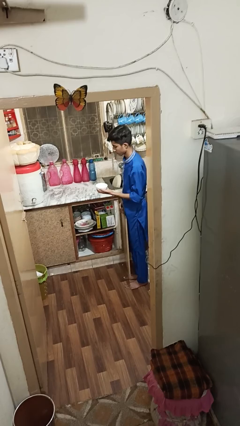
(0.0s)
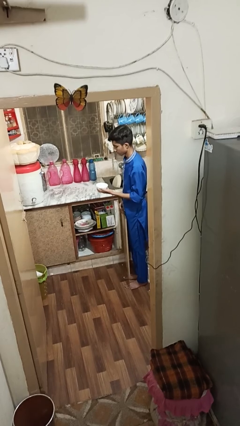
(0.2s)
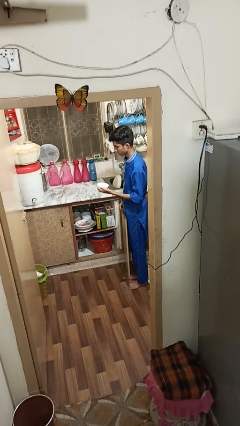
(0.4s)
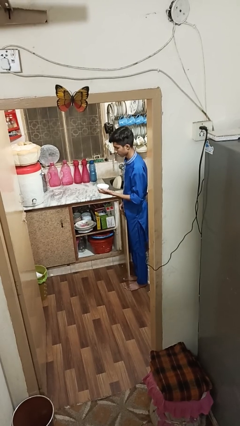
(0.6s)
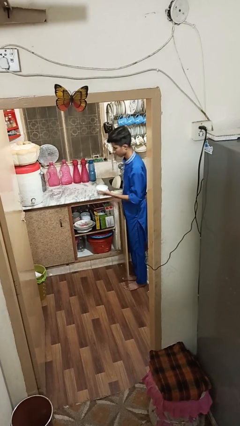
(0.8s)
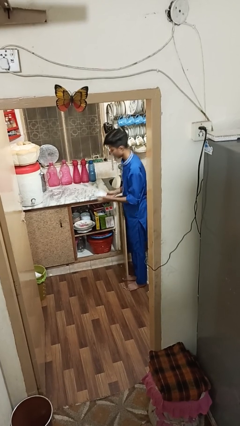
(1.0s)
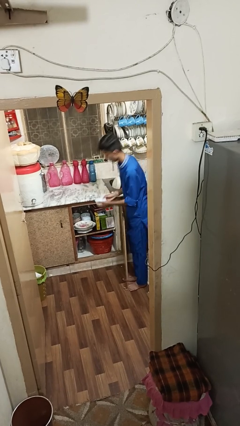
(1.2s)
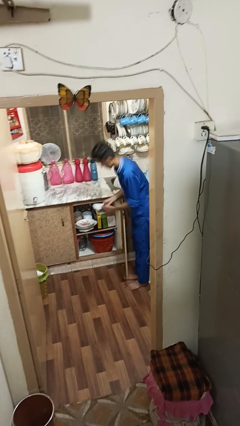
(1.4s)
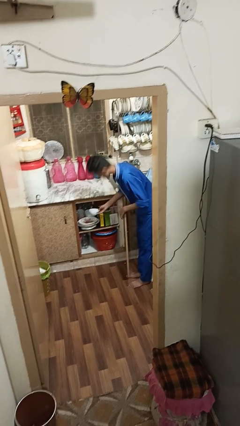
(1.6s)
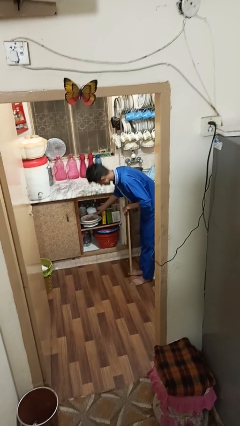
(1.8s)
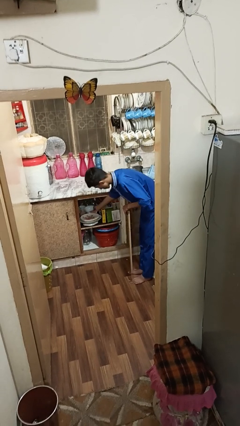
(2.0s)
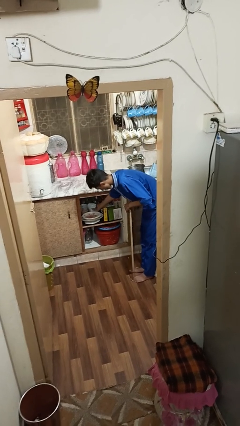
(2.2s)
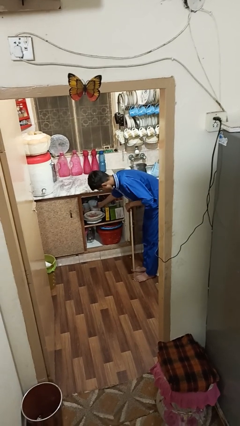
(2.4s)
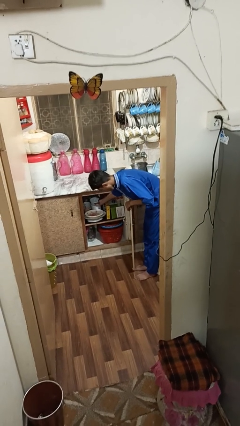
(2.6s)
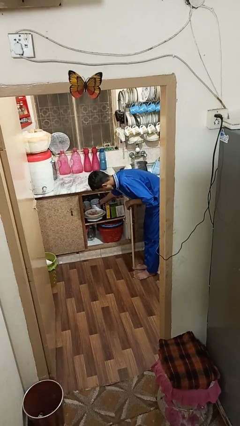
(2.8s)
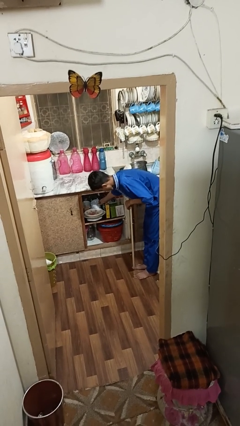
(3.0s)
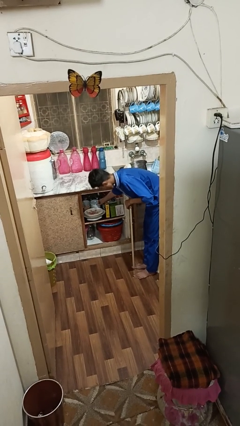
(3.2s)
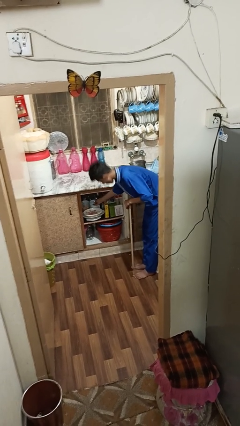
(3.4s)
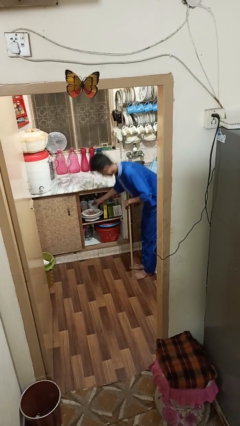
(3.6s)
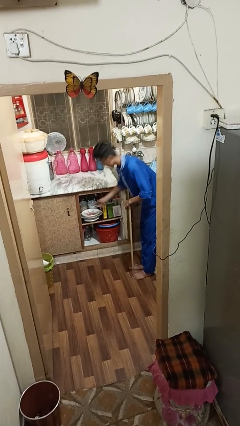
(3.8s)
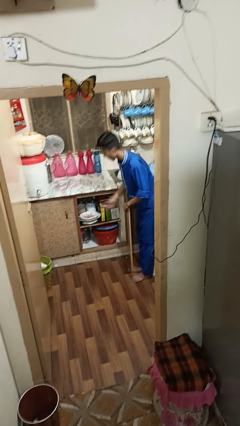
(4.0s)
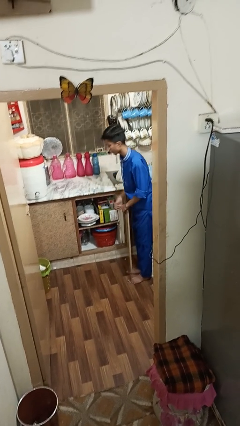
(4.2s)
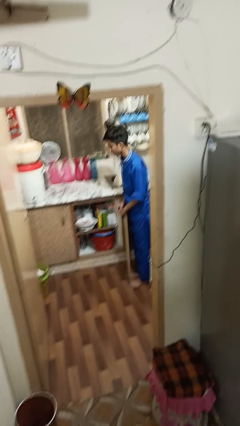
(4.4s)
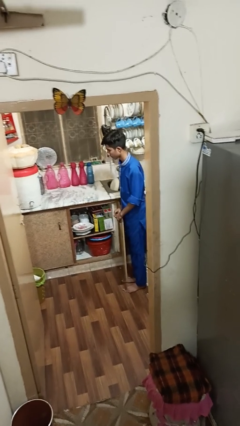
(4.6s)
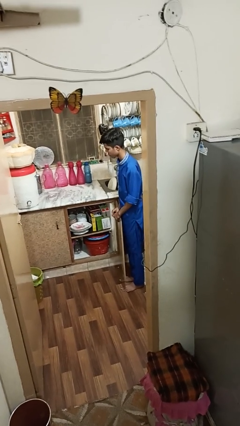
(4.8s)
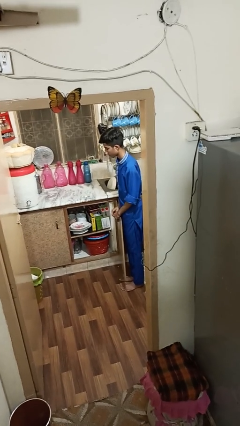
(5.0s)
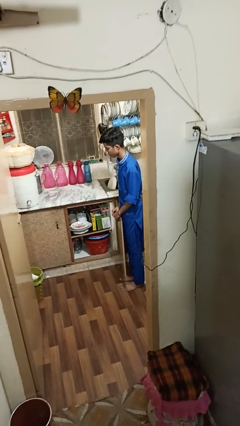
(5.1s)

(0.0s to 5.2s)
person puts object in cabinet

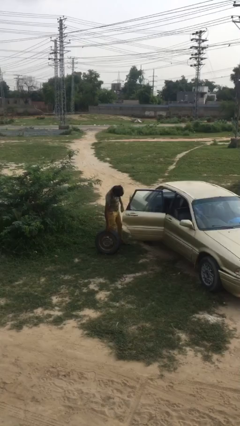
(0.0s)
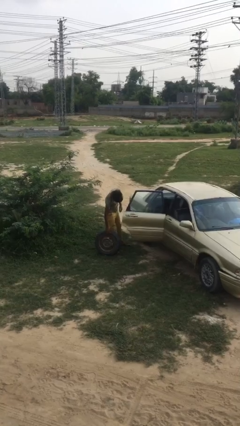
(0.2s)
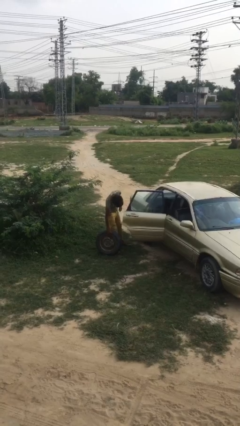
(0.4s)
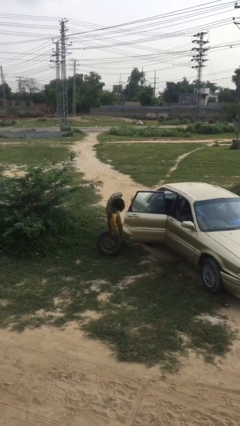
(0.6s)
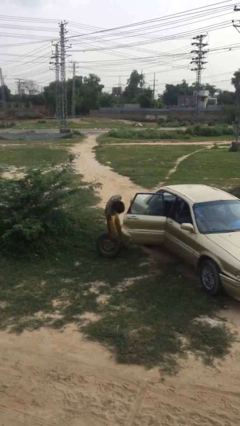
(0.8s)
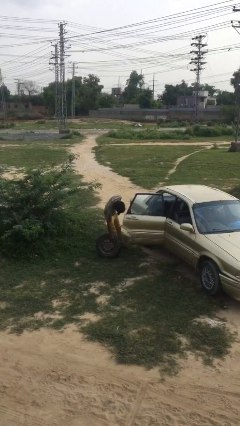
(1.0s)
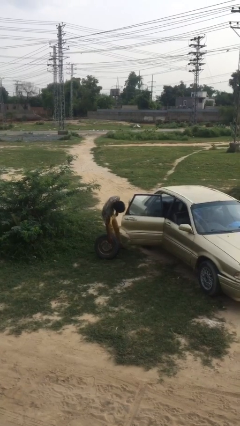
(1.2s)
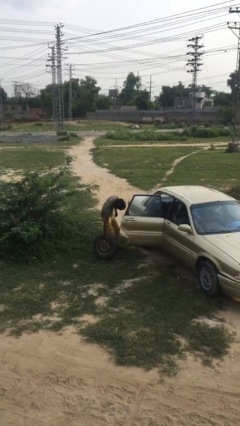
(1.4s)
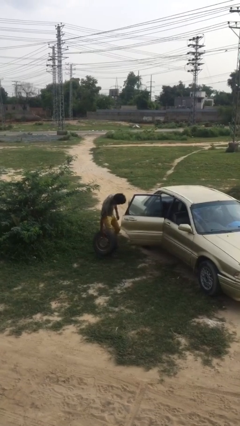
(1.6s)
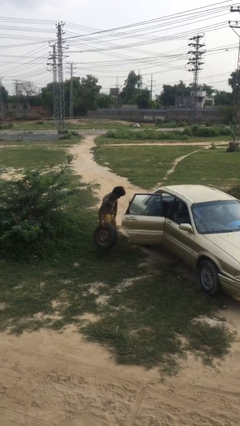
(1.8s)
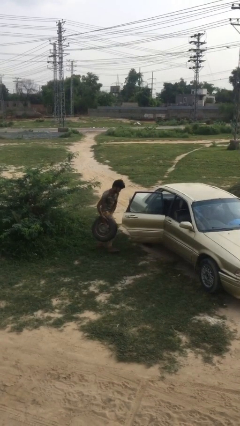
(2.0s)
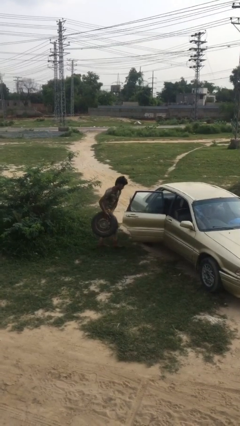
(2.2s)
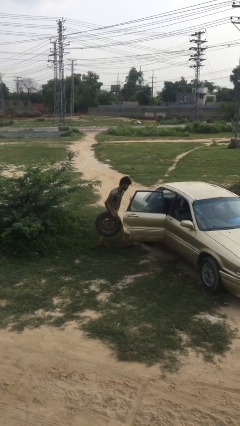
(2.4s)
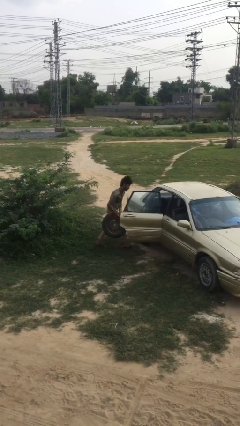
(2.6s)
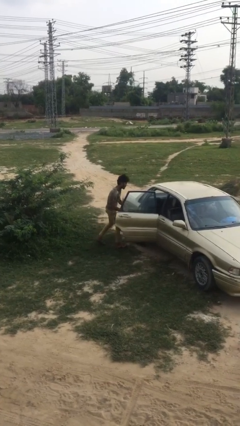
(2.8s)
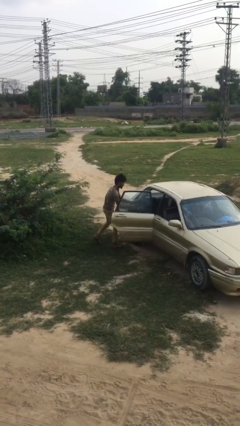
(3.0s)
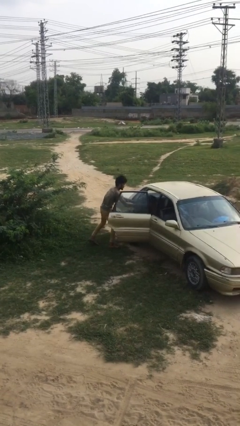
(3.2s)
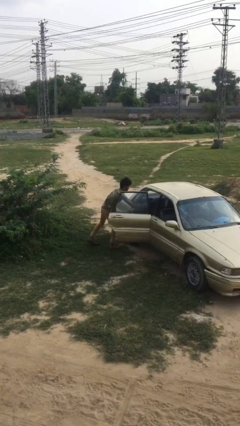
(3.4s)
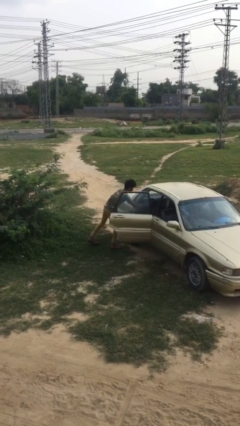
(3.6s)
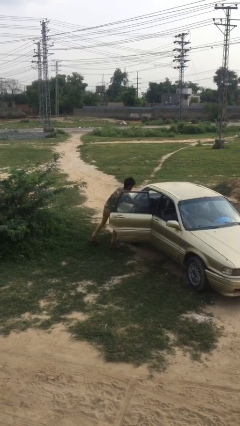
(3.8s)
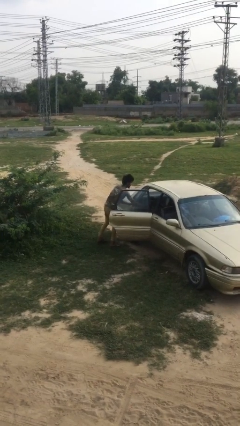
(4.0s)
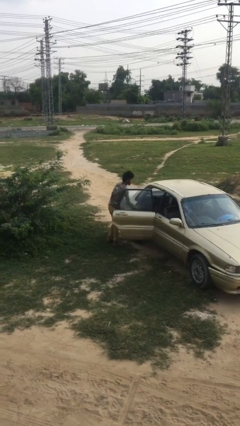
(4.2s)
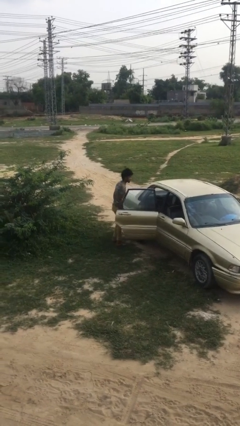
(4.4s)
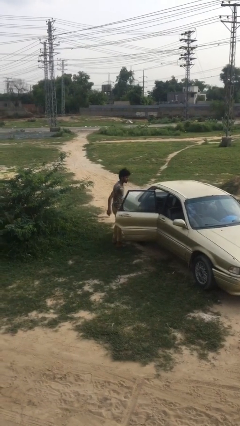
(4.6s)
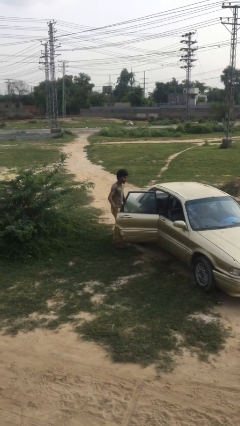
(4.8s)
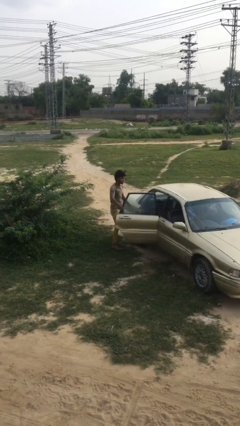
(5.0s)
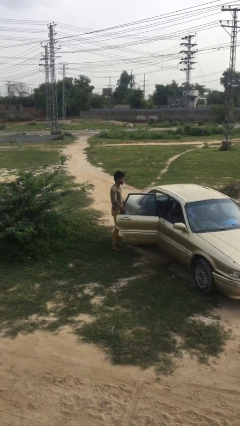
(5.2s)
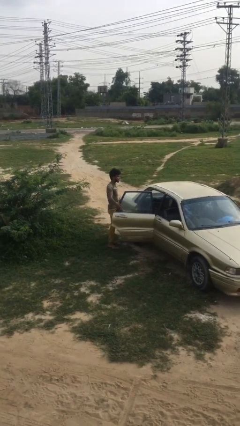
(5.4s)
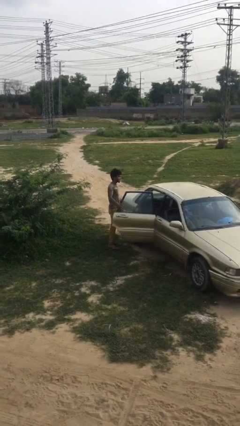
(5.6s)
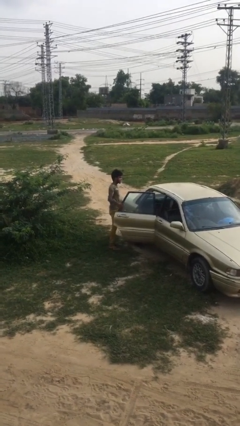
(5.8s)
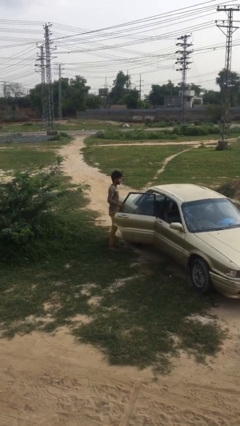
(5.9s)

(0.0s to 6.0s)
person loads car

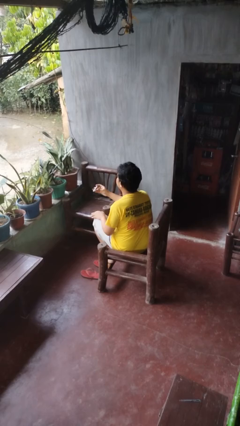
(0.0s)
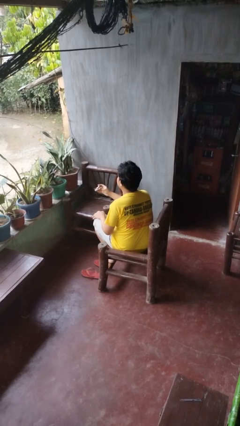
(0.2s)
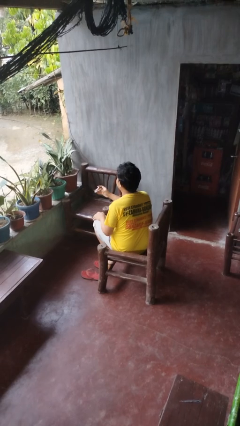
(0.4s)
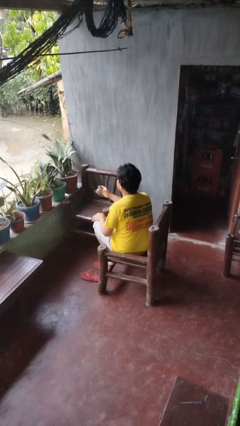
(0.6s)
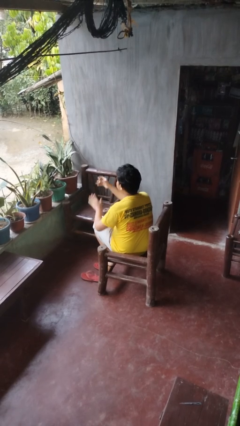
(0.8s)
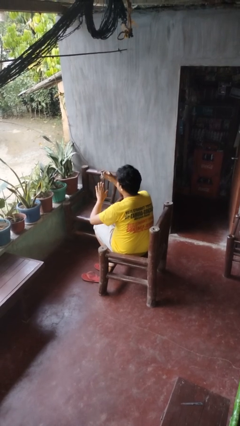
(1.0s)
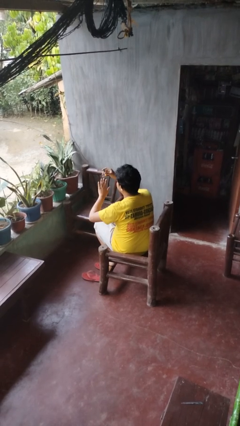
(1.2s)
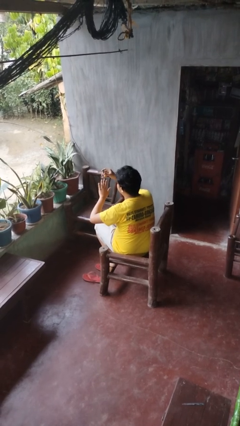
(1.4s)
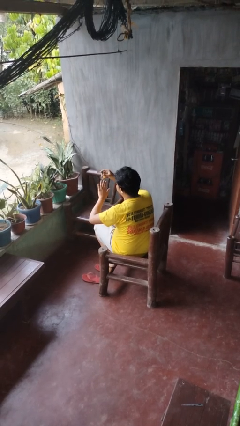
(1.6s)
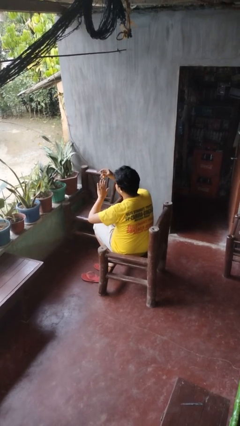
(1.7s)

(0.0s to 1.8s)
person clips fingernails

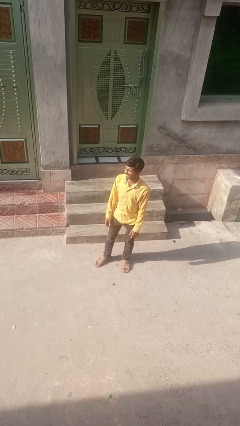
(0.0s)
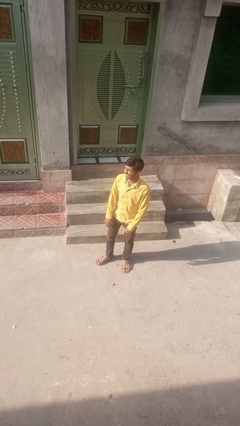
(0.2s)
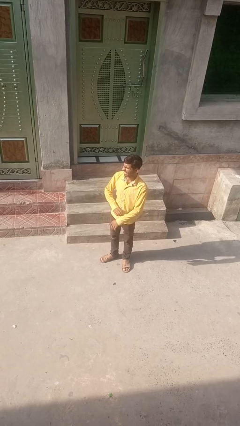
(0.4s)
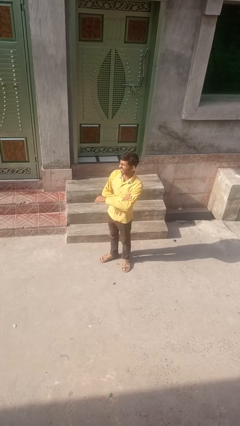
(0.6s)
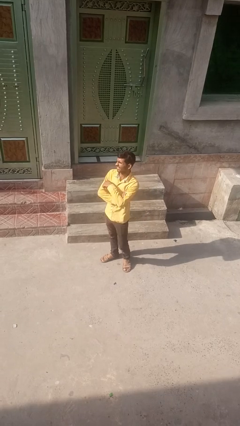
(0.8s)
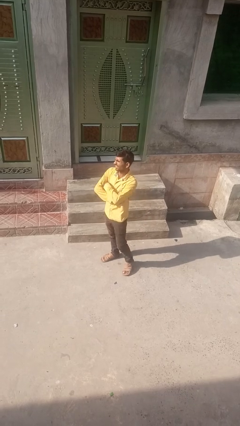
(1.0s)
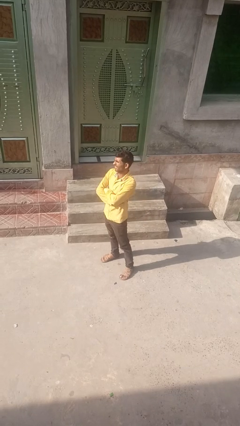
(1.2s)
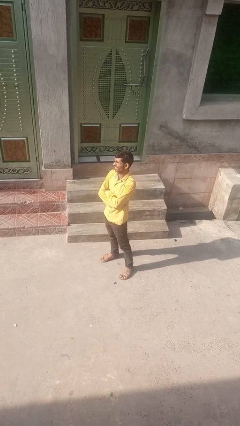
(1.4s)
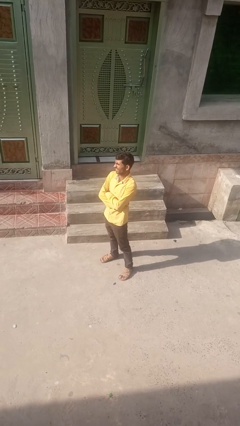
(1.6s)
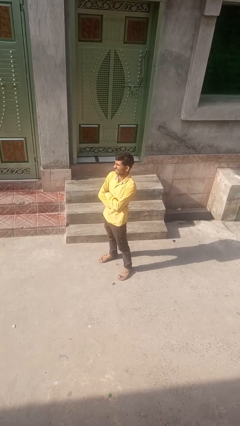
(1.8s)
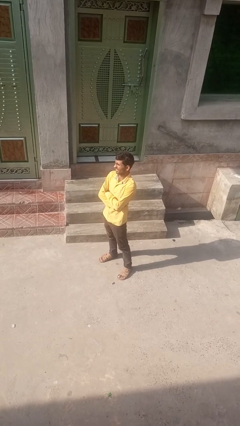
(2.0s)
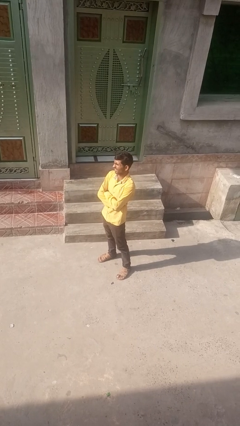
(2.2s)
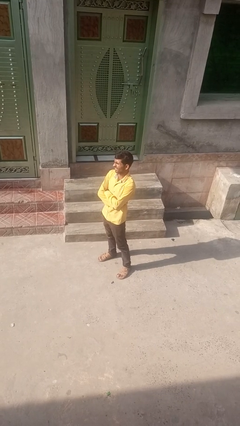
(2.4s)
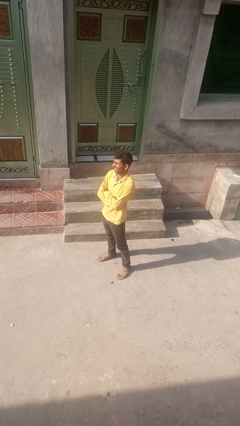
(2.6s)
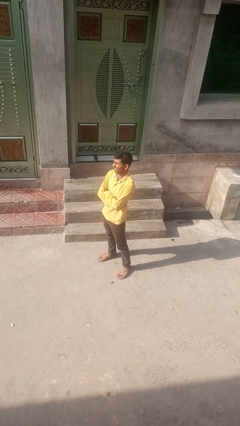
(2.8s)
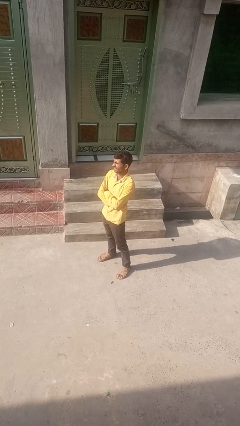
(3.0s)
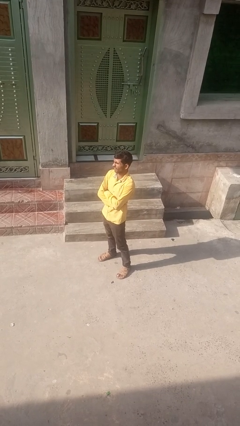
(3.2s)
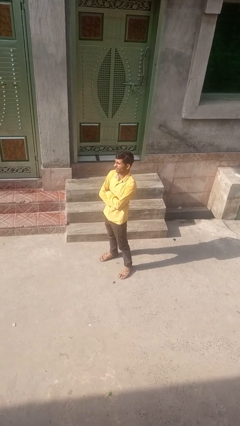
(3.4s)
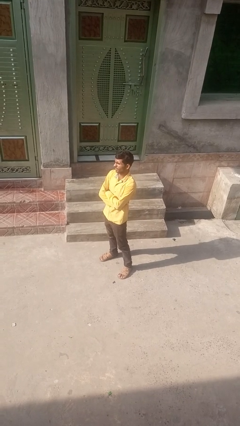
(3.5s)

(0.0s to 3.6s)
person crosses arms

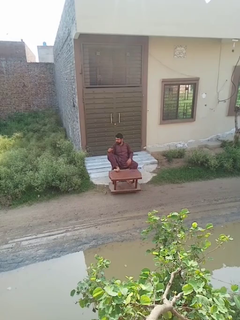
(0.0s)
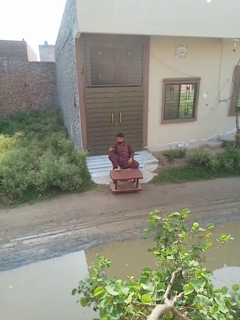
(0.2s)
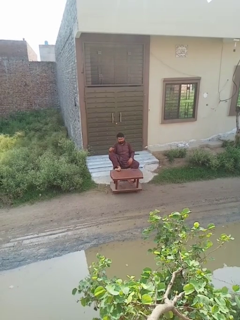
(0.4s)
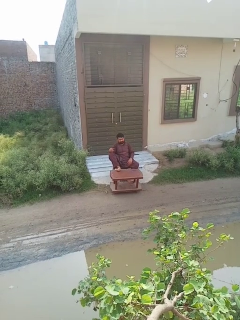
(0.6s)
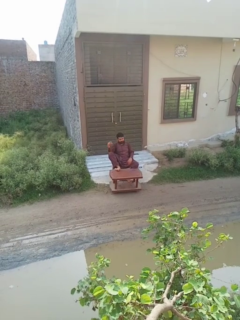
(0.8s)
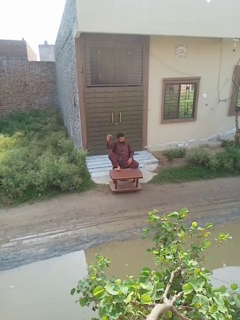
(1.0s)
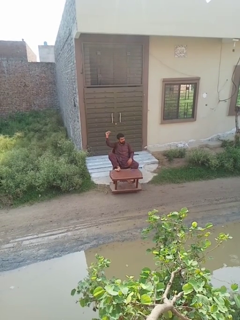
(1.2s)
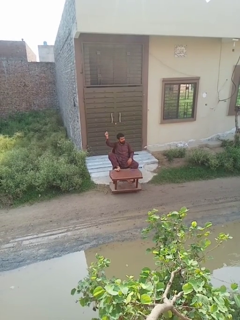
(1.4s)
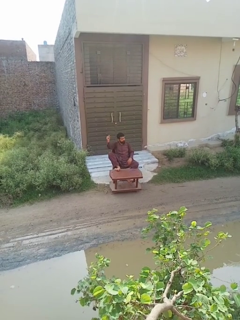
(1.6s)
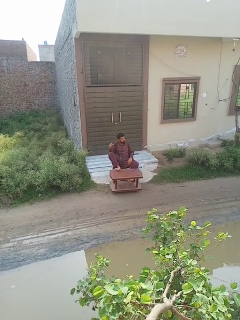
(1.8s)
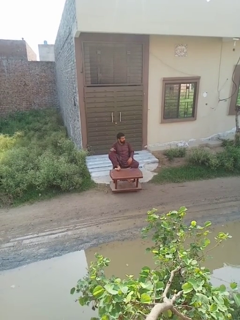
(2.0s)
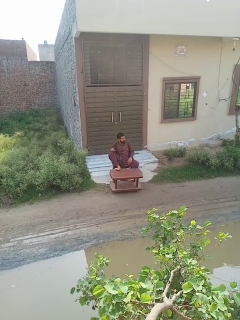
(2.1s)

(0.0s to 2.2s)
person snaps fingers
